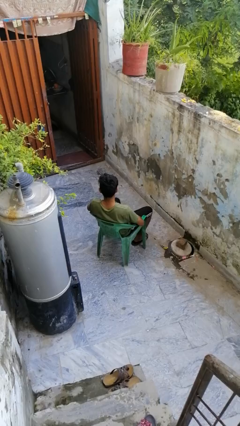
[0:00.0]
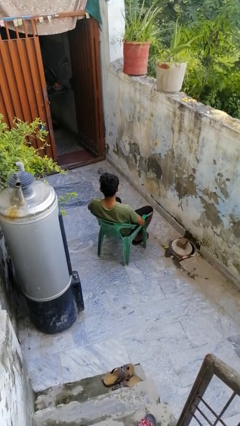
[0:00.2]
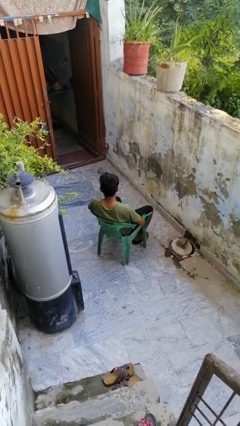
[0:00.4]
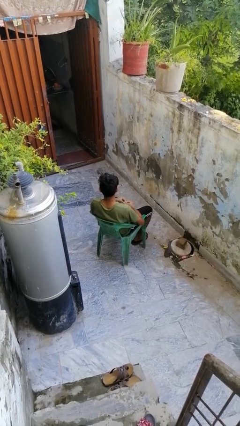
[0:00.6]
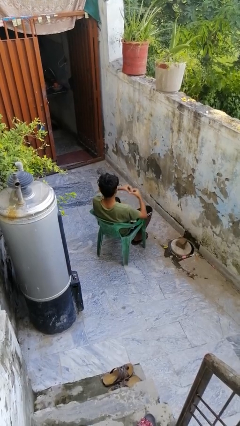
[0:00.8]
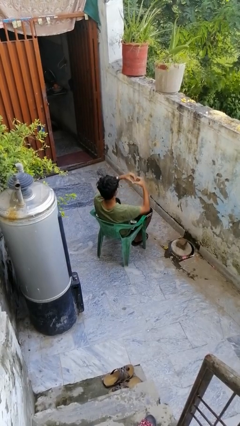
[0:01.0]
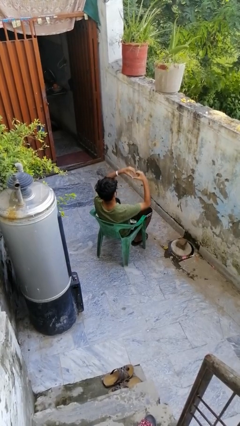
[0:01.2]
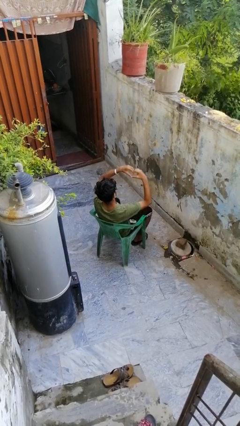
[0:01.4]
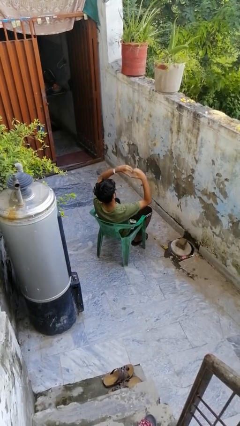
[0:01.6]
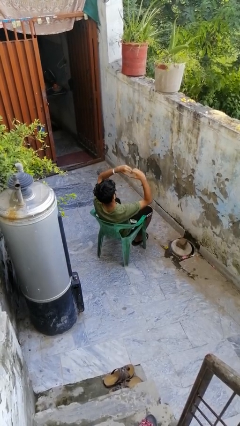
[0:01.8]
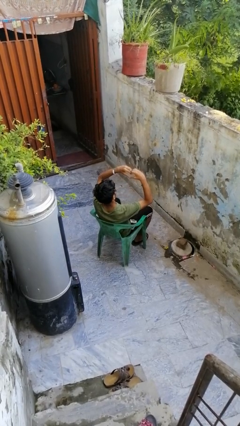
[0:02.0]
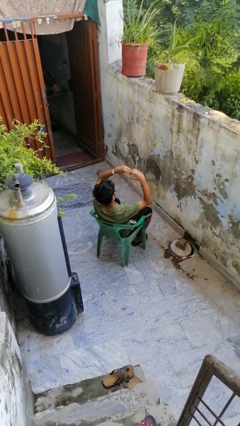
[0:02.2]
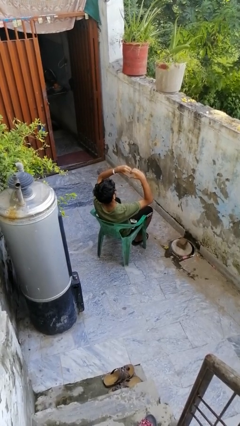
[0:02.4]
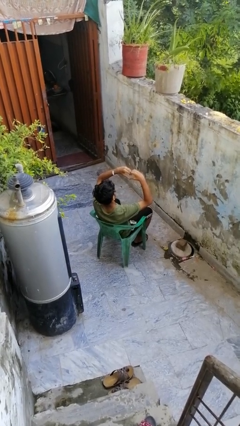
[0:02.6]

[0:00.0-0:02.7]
person gestures heart

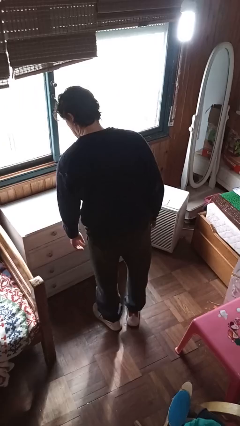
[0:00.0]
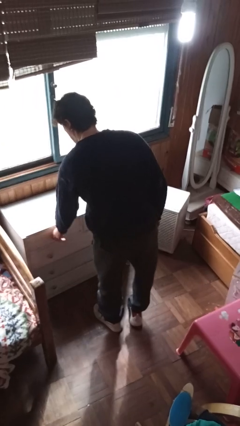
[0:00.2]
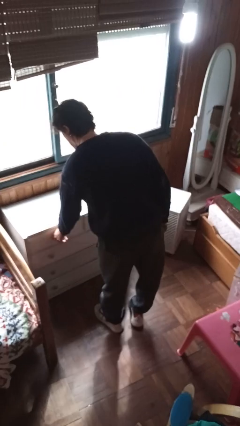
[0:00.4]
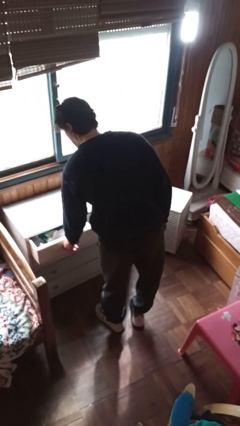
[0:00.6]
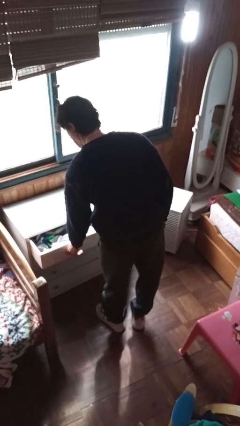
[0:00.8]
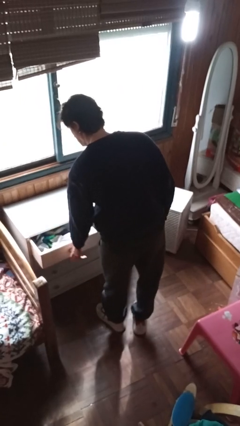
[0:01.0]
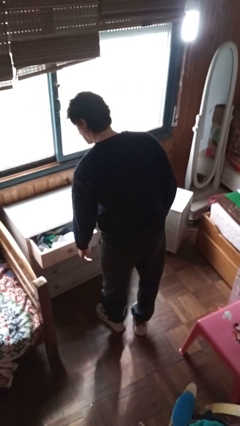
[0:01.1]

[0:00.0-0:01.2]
person opens dresser drawer

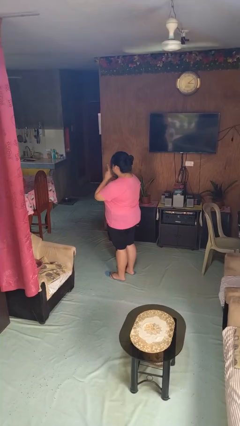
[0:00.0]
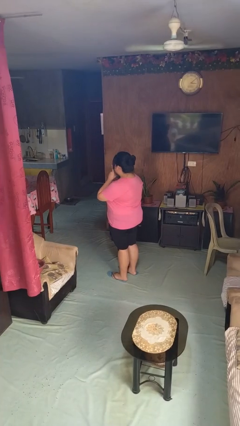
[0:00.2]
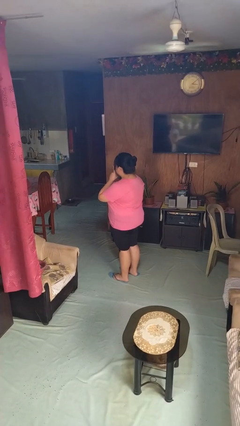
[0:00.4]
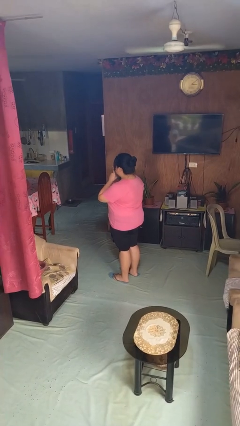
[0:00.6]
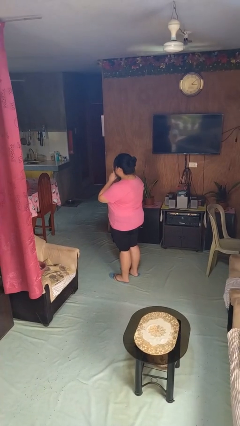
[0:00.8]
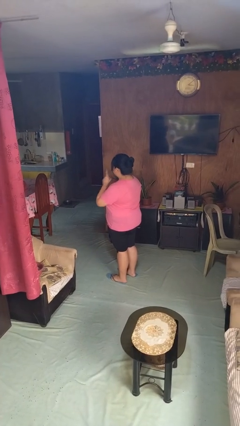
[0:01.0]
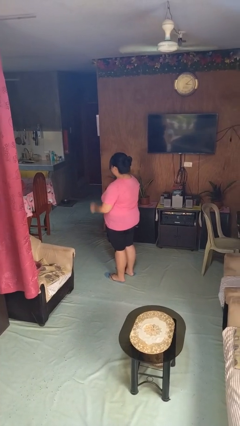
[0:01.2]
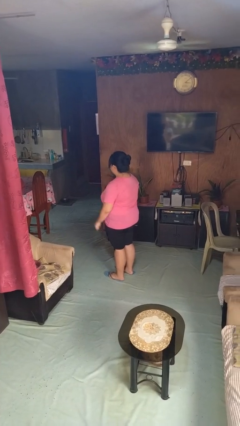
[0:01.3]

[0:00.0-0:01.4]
person gestures be quiet

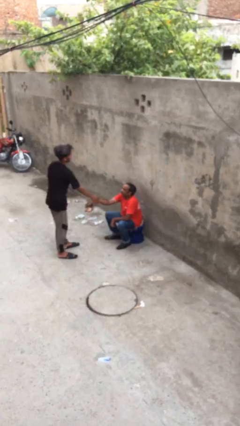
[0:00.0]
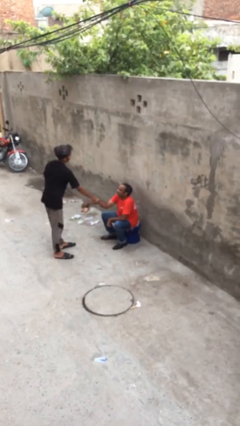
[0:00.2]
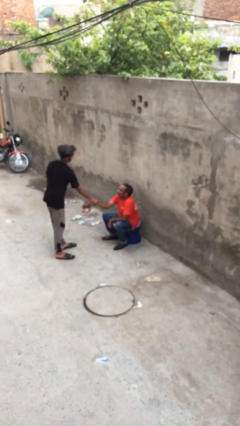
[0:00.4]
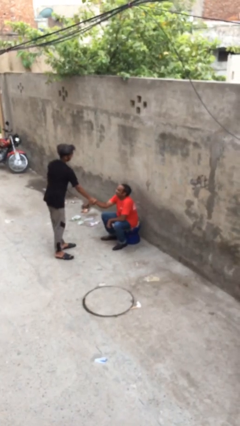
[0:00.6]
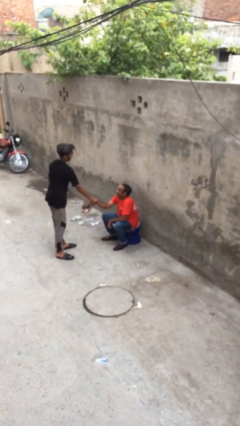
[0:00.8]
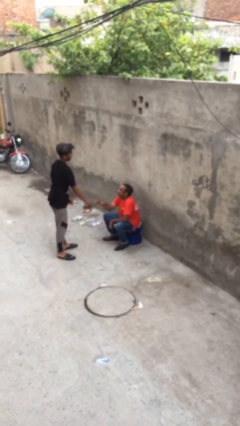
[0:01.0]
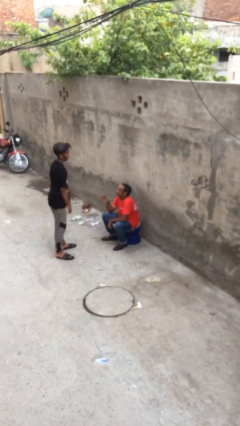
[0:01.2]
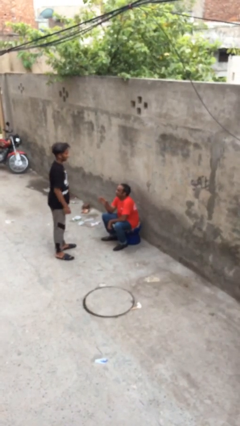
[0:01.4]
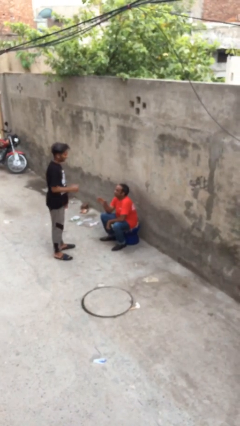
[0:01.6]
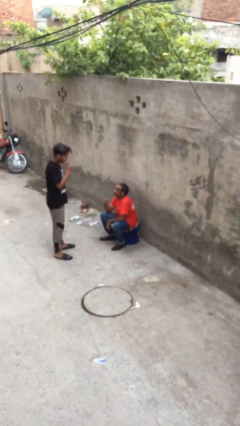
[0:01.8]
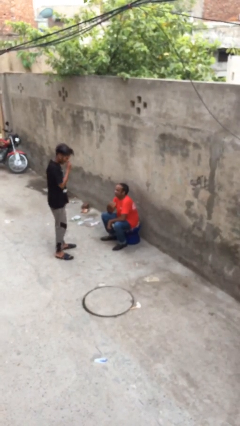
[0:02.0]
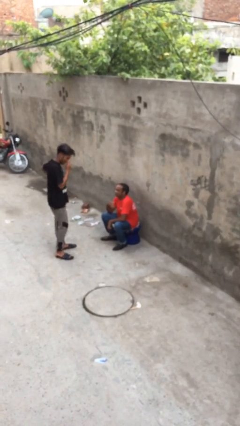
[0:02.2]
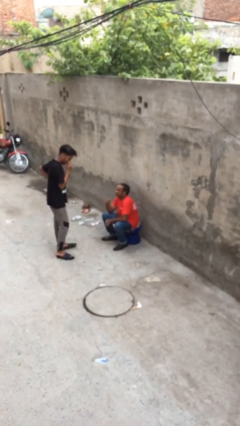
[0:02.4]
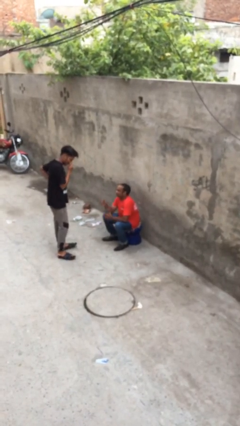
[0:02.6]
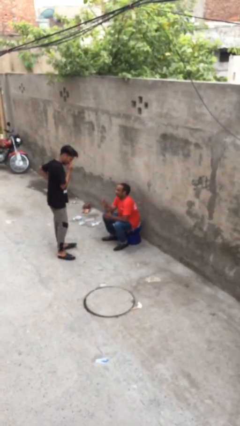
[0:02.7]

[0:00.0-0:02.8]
person shakes hand

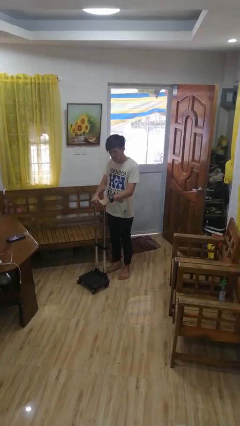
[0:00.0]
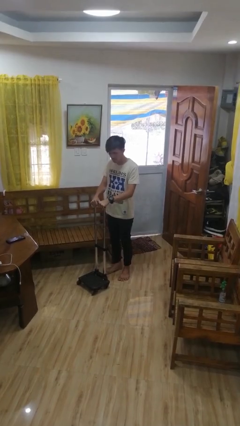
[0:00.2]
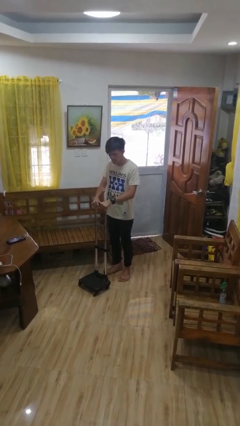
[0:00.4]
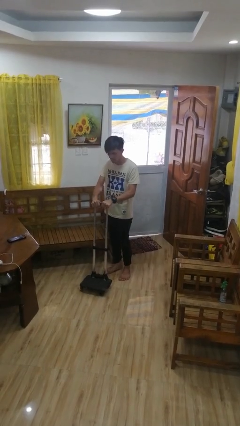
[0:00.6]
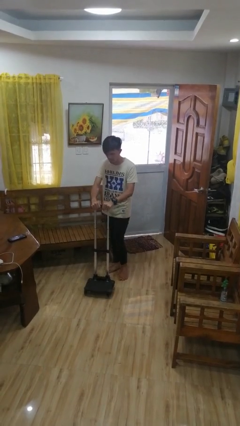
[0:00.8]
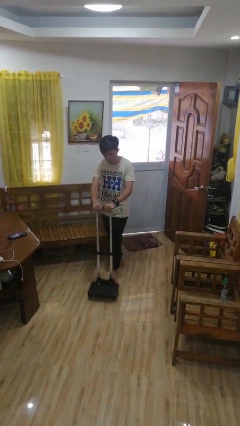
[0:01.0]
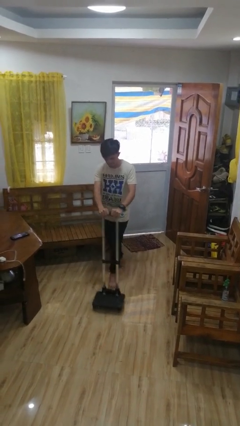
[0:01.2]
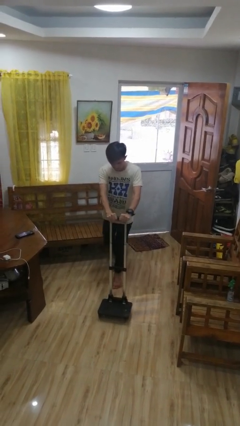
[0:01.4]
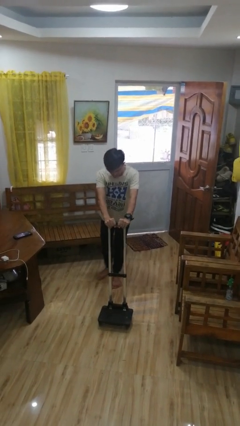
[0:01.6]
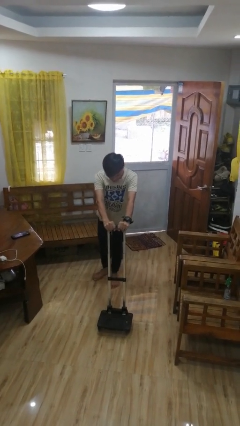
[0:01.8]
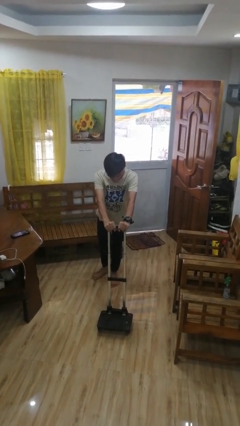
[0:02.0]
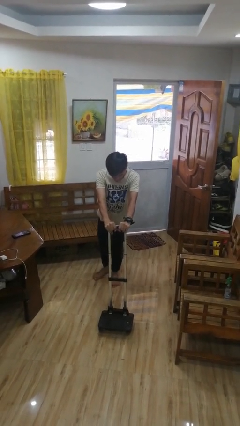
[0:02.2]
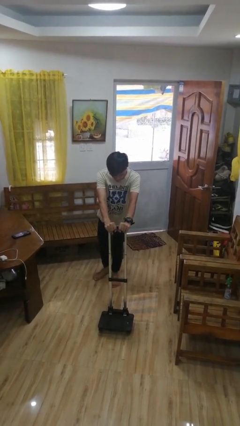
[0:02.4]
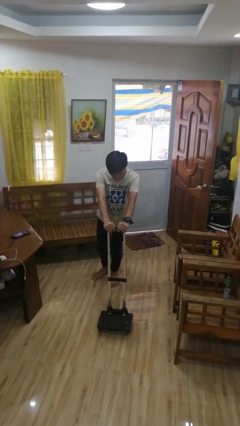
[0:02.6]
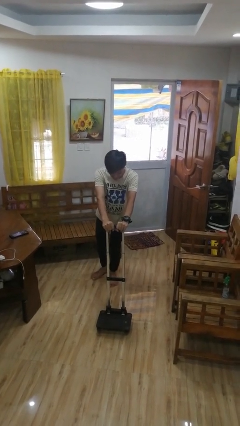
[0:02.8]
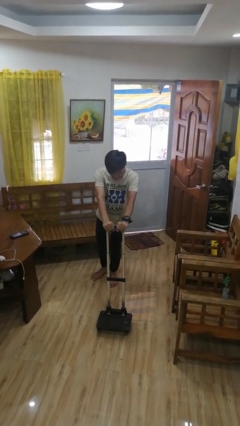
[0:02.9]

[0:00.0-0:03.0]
person pushes wheeled cart

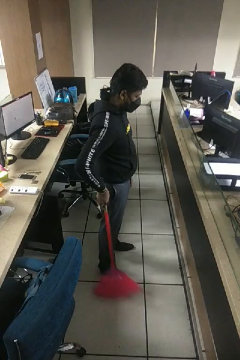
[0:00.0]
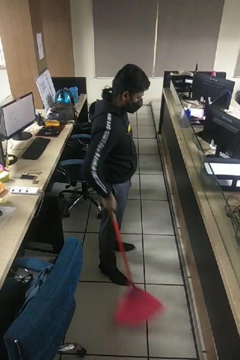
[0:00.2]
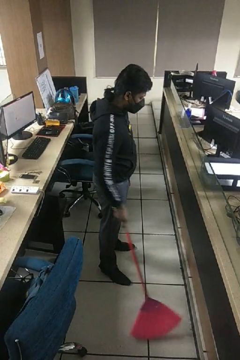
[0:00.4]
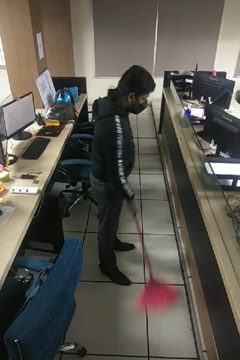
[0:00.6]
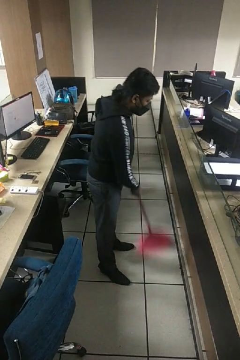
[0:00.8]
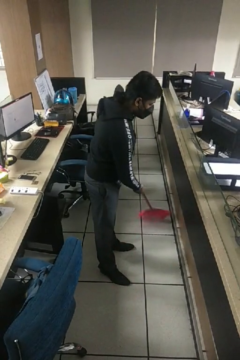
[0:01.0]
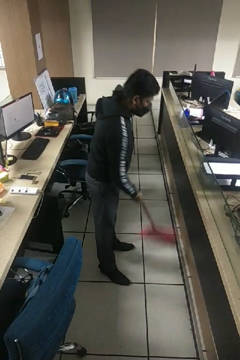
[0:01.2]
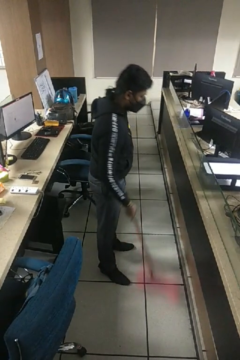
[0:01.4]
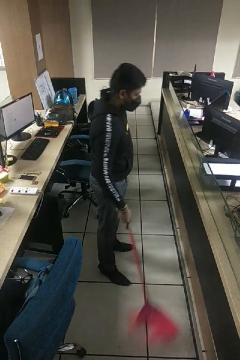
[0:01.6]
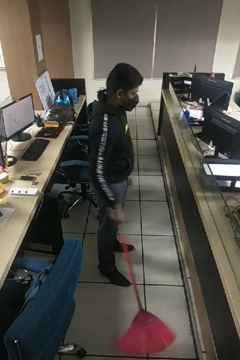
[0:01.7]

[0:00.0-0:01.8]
person sweeps floor

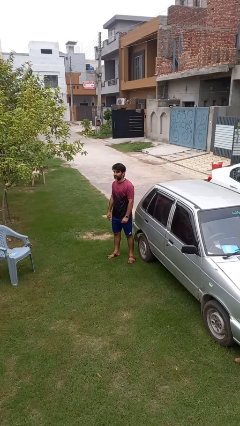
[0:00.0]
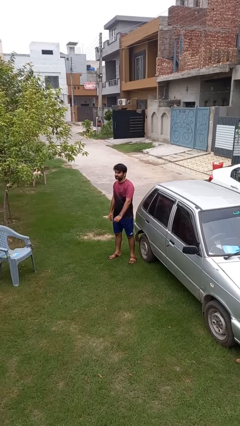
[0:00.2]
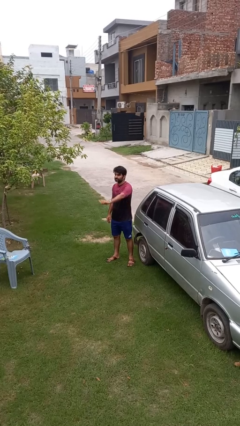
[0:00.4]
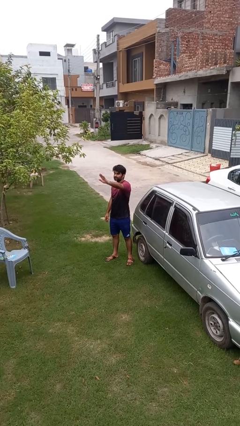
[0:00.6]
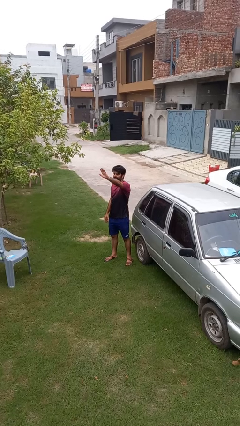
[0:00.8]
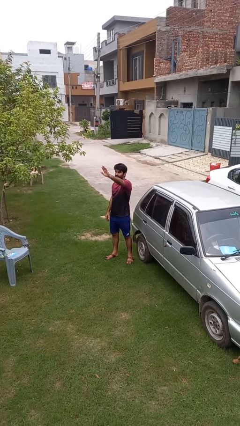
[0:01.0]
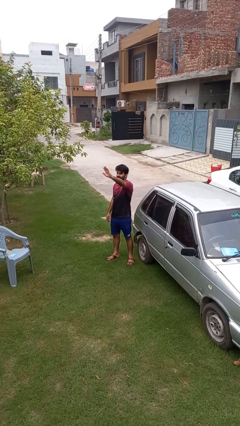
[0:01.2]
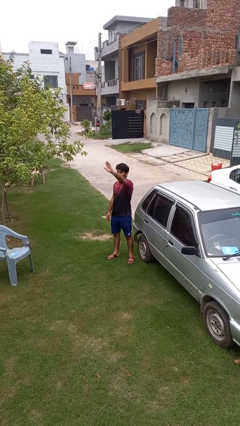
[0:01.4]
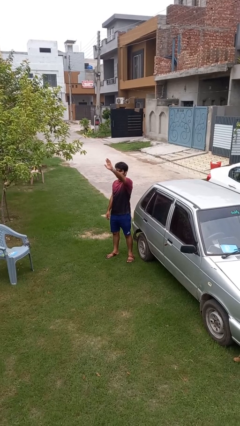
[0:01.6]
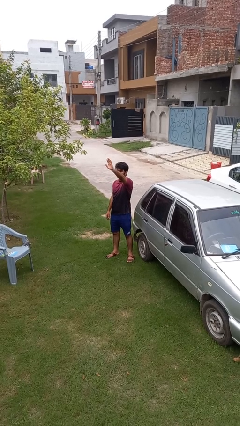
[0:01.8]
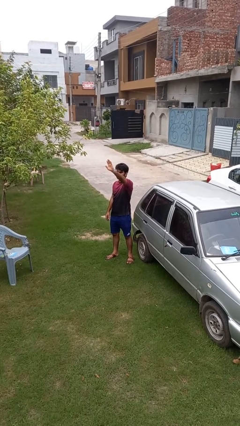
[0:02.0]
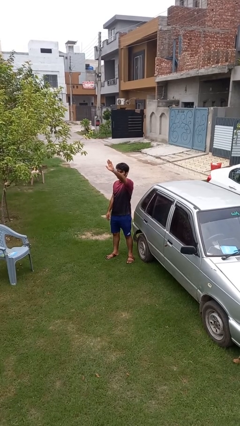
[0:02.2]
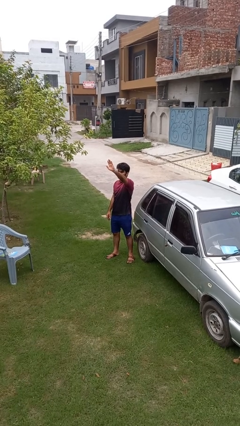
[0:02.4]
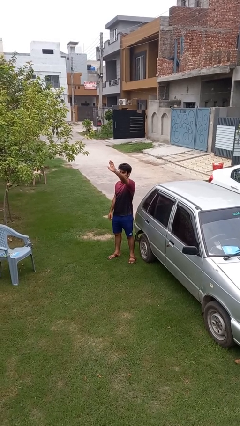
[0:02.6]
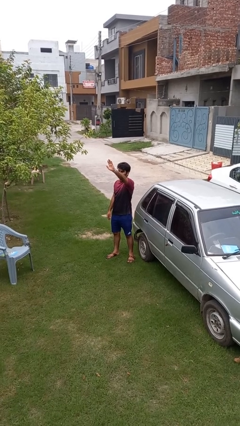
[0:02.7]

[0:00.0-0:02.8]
person gestures raise hand

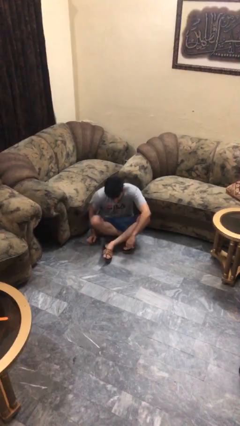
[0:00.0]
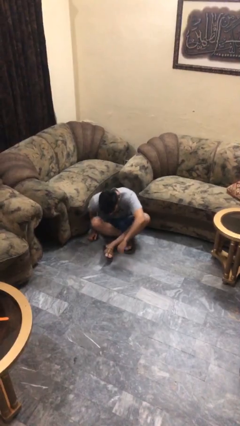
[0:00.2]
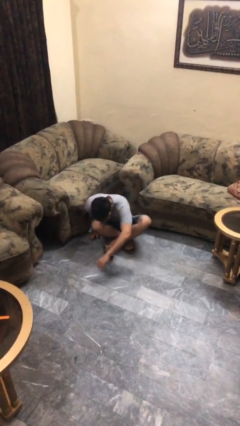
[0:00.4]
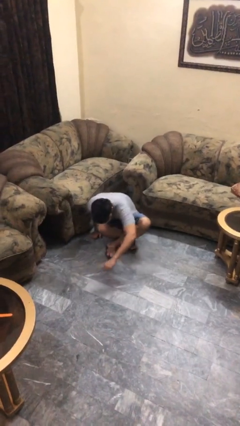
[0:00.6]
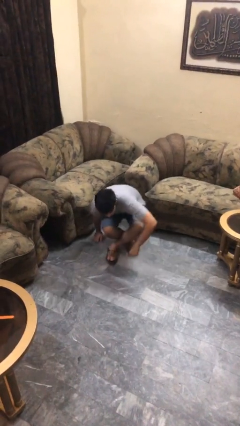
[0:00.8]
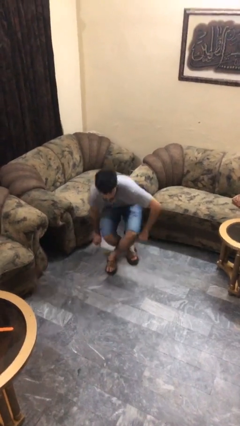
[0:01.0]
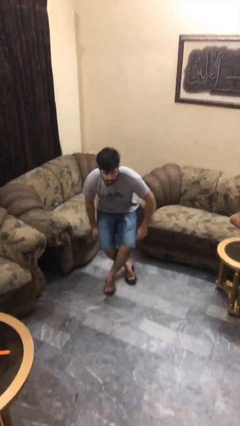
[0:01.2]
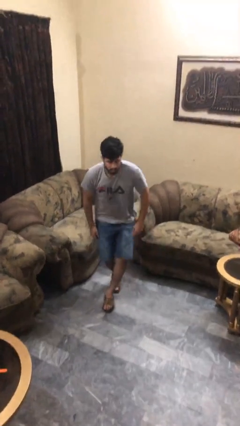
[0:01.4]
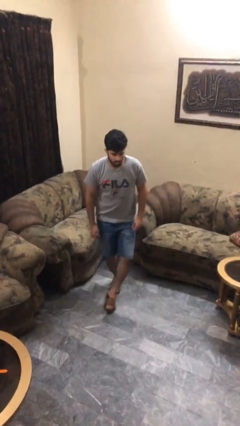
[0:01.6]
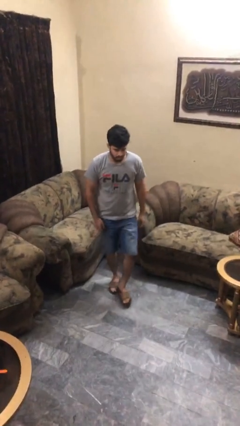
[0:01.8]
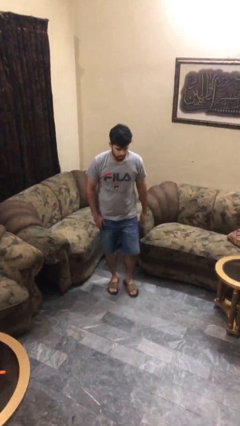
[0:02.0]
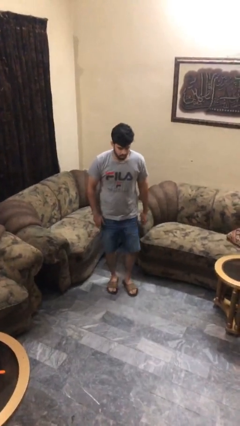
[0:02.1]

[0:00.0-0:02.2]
person stands up from floor
